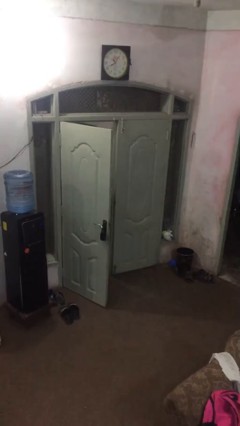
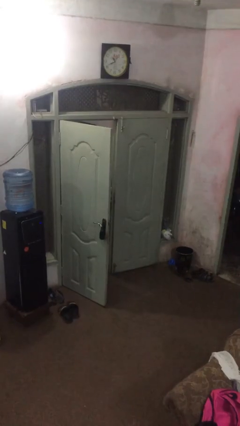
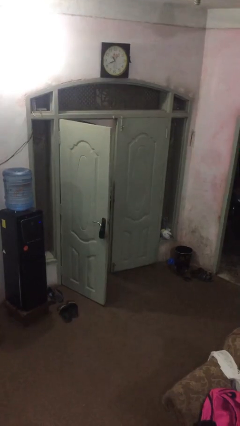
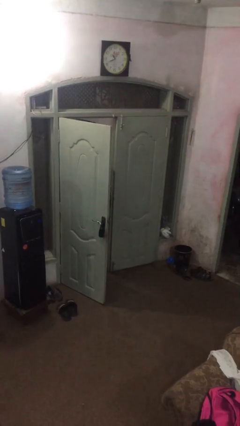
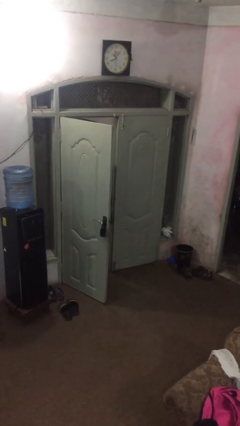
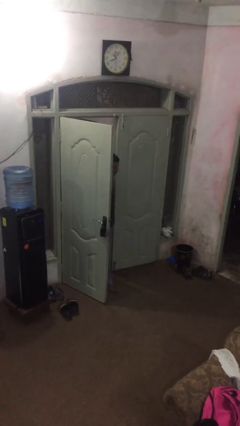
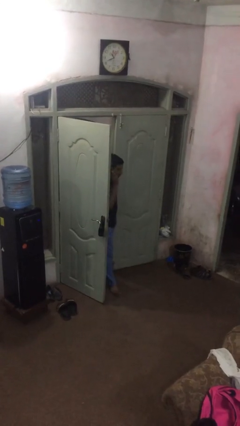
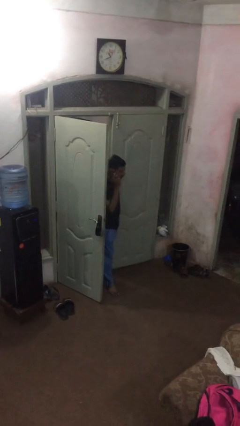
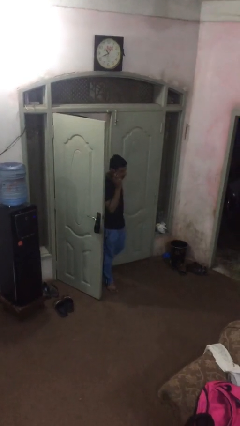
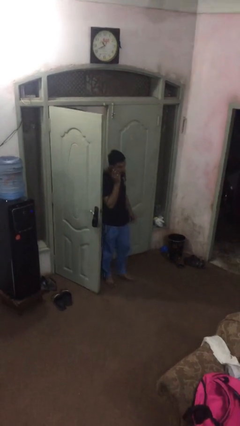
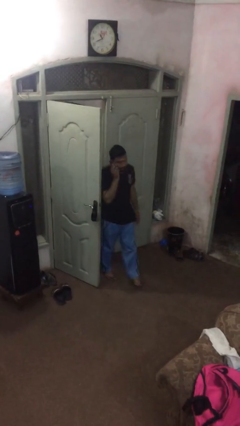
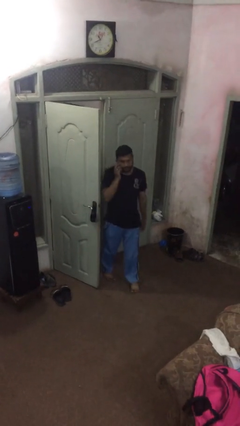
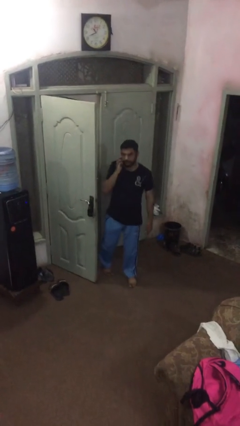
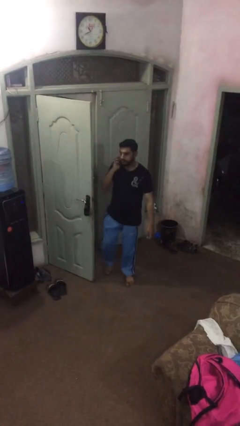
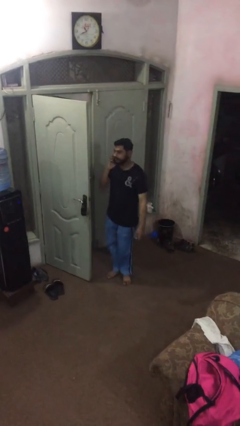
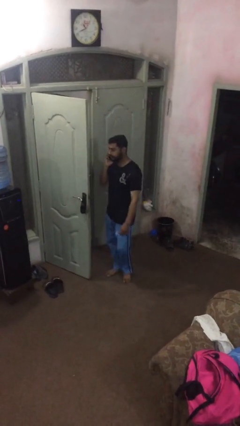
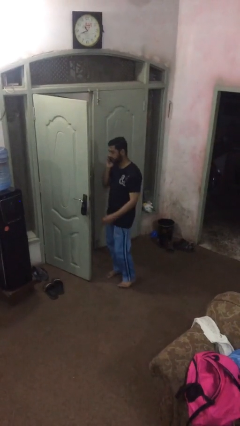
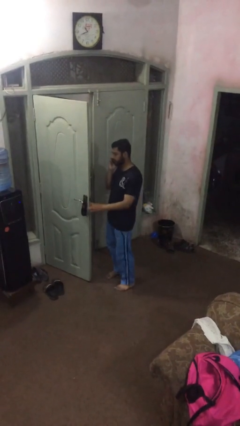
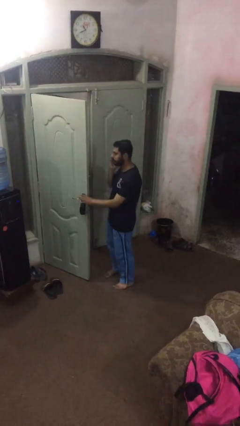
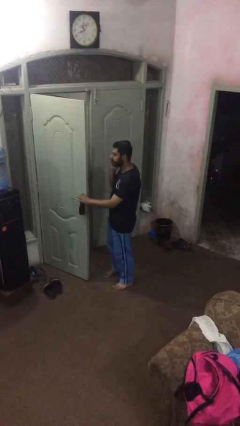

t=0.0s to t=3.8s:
person enters scene through structure

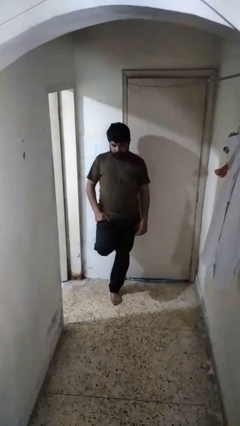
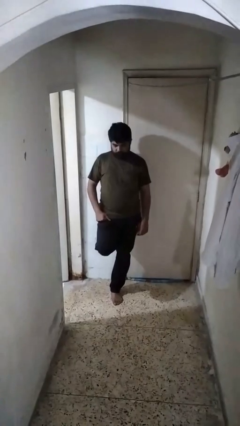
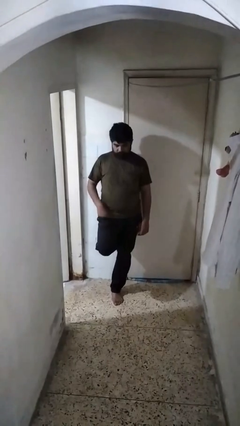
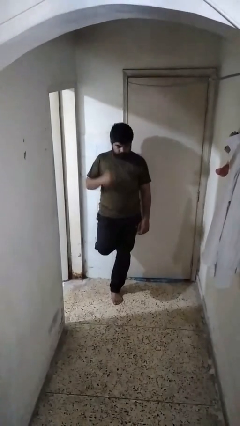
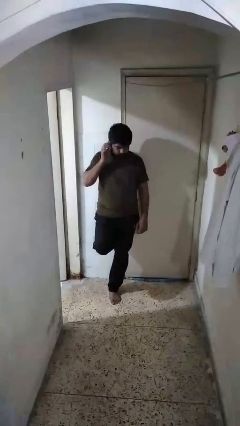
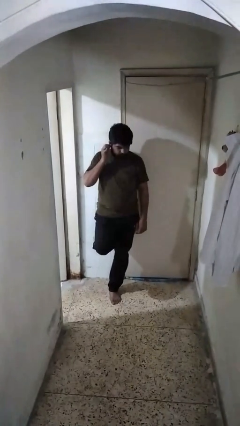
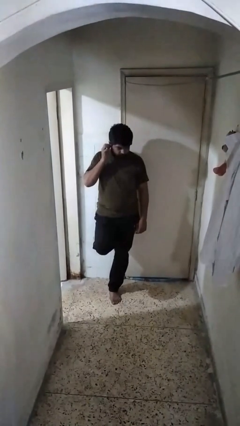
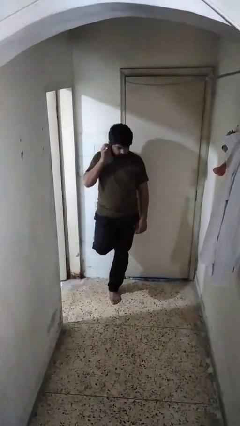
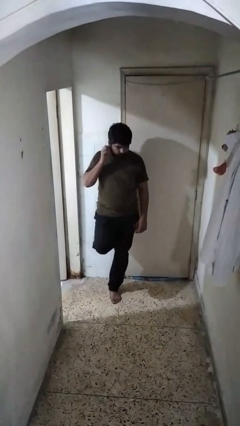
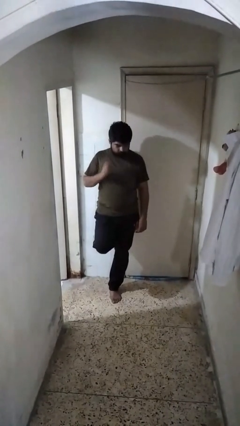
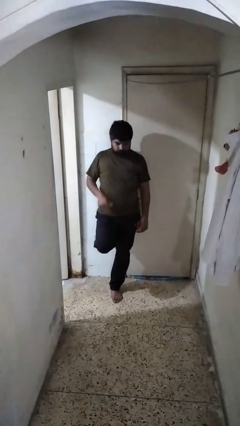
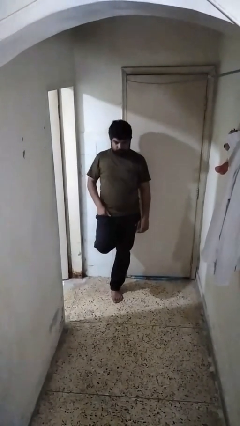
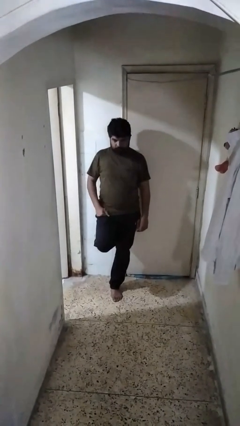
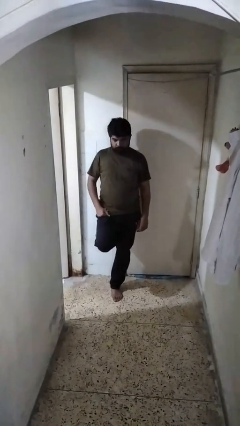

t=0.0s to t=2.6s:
person touches earlobe

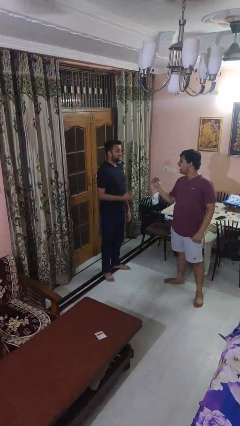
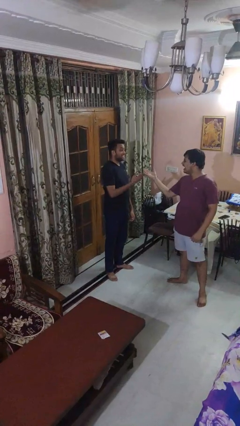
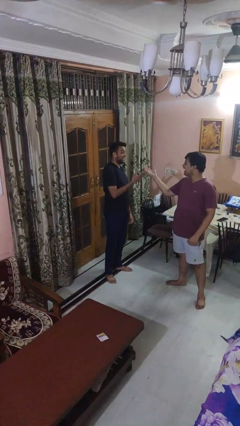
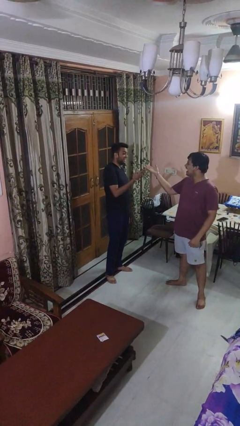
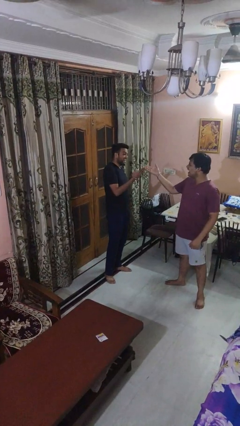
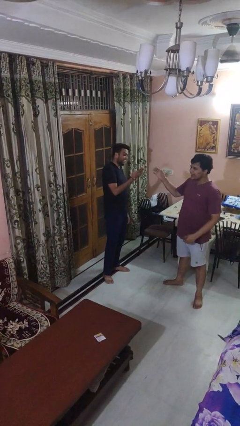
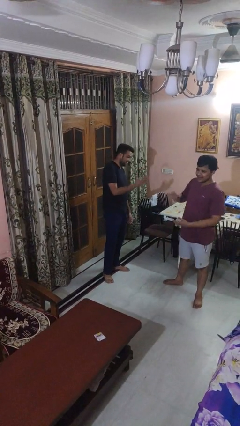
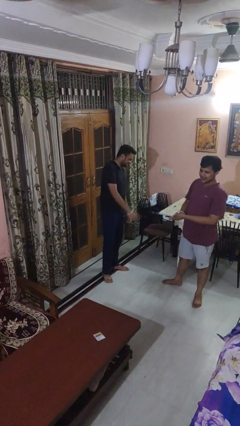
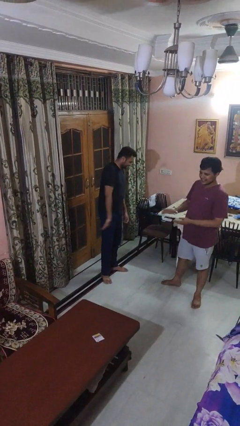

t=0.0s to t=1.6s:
person laughs with person

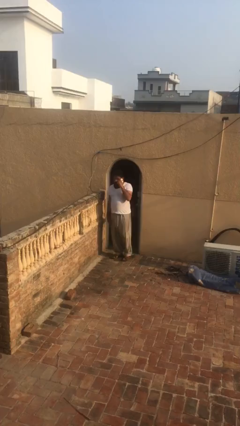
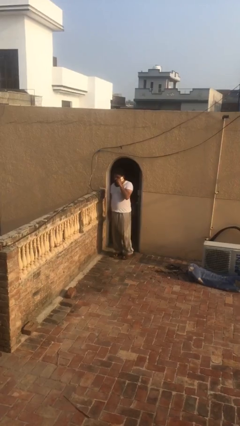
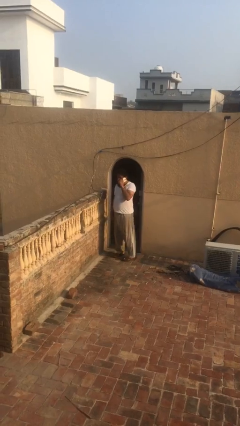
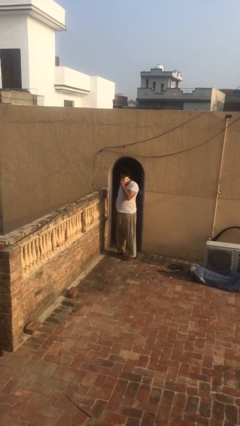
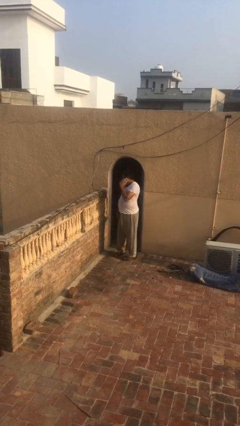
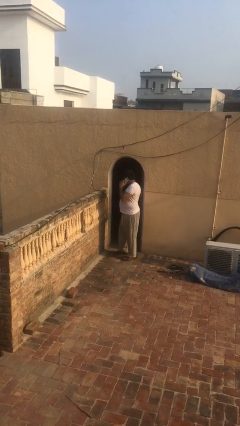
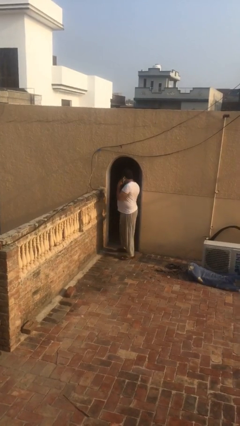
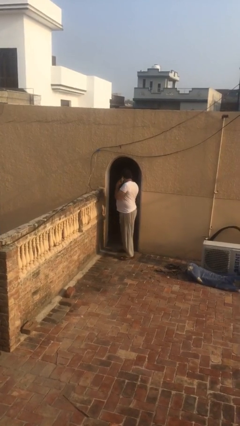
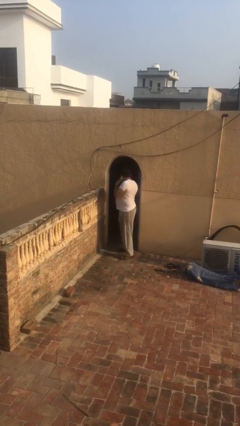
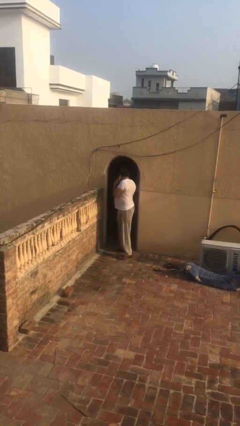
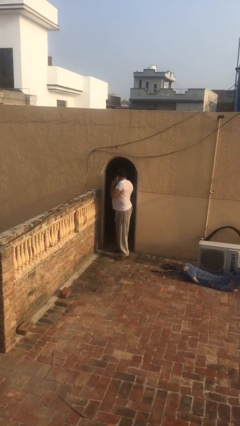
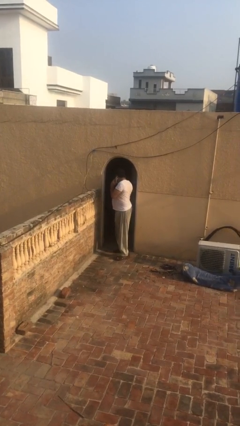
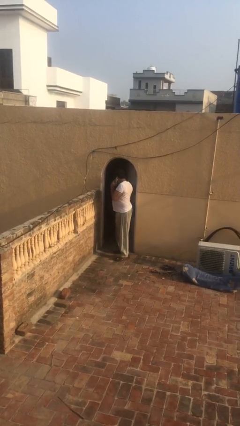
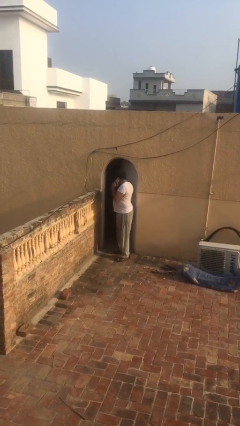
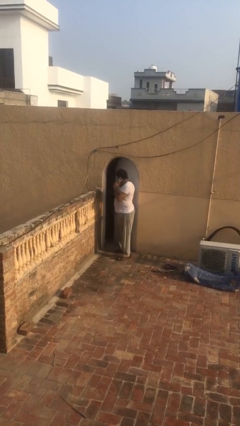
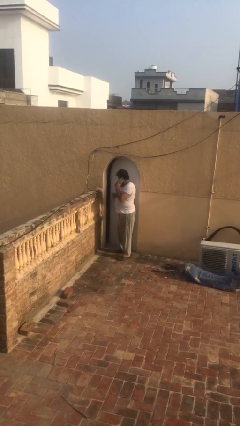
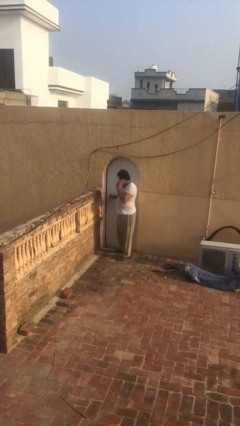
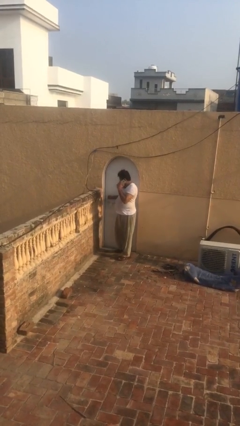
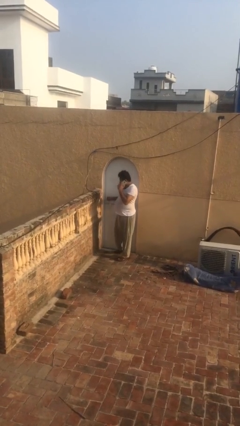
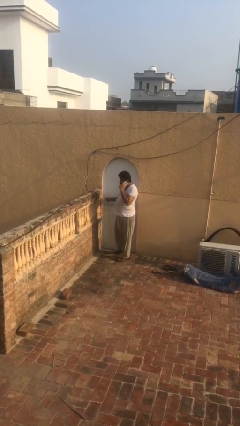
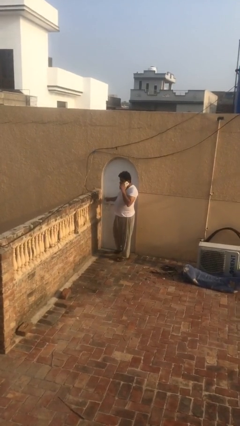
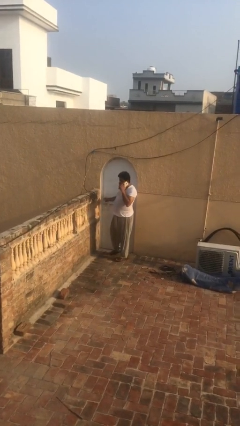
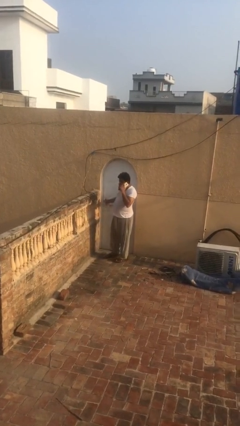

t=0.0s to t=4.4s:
person closes facility door

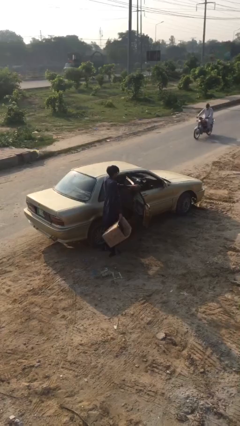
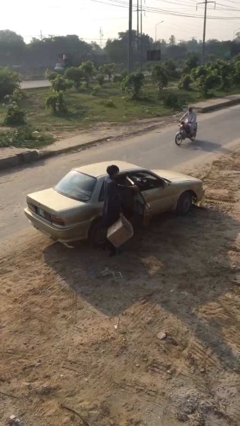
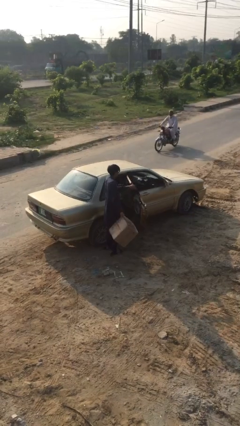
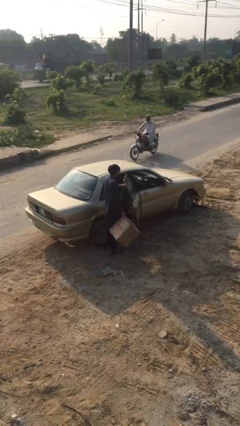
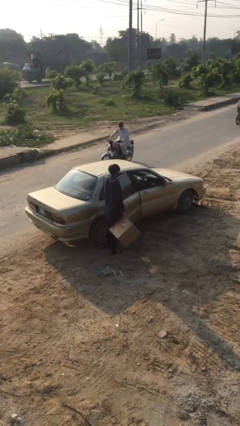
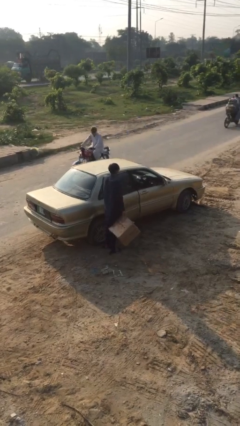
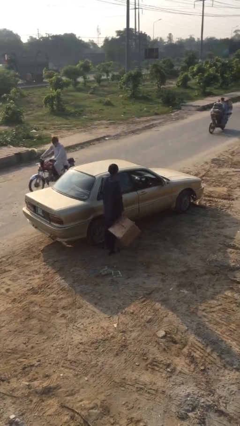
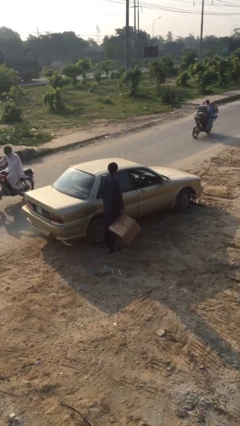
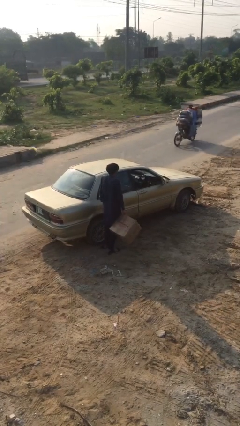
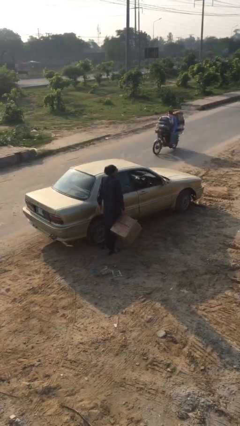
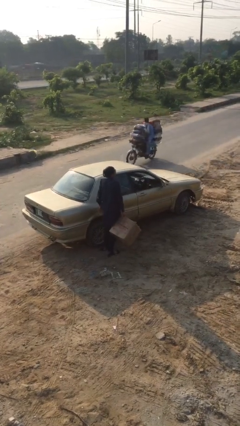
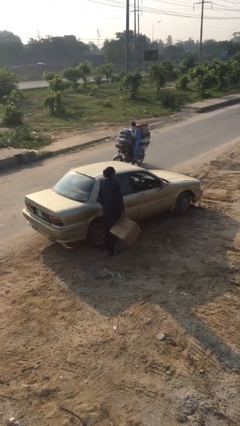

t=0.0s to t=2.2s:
person closes car door

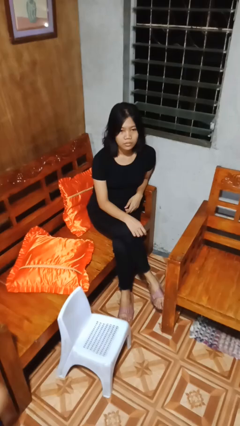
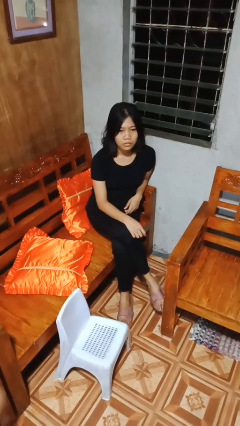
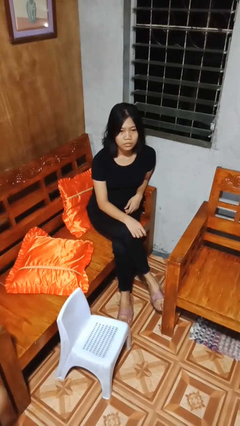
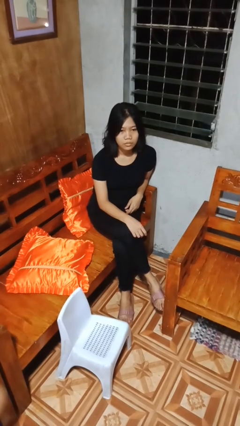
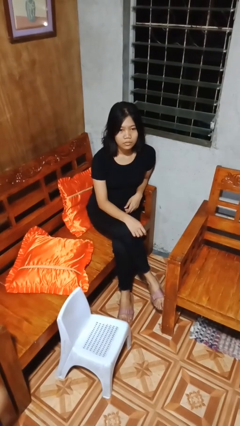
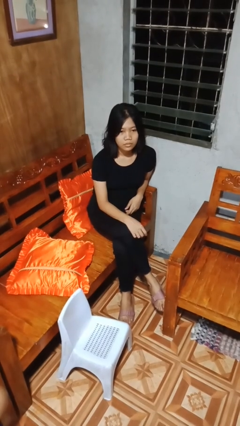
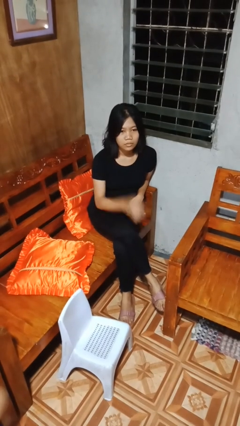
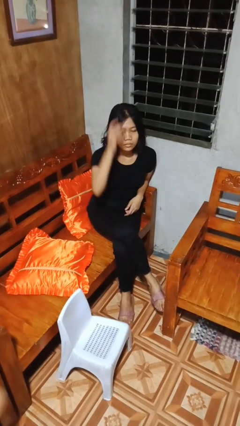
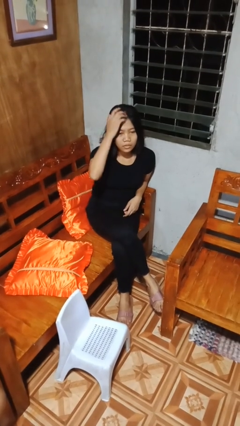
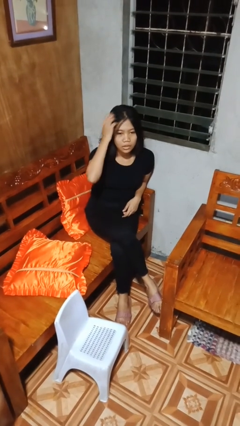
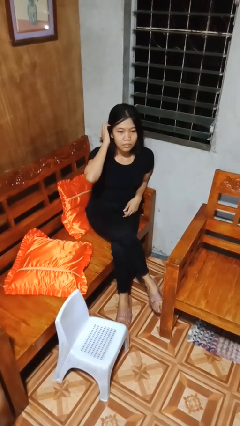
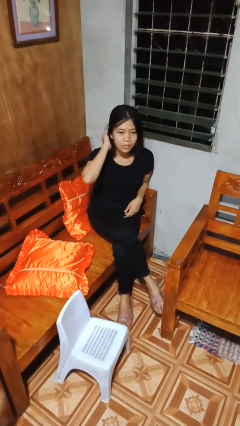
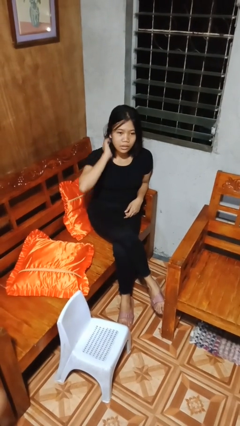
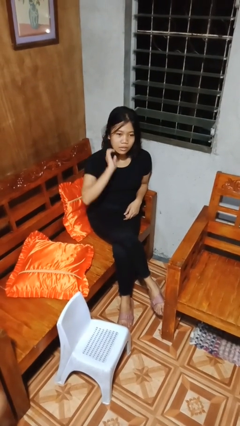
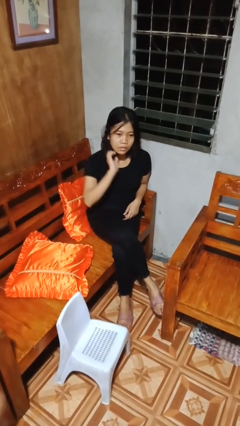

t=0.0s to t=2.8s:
person strokes hair

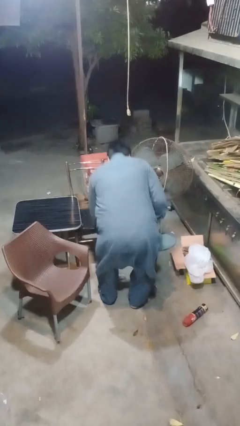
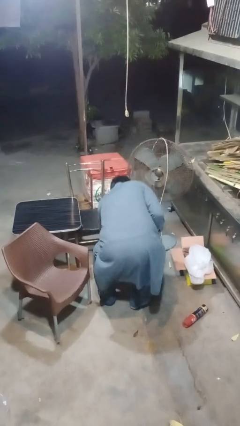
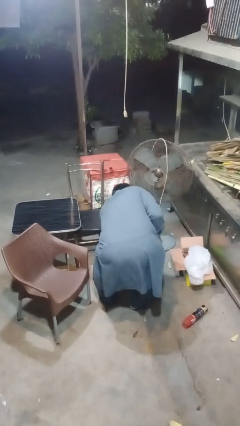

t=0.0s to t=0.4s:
person discards trash
